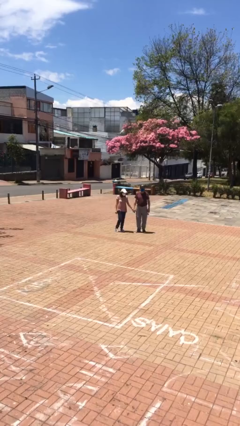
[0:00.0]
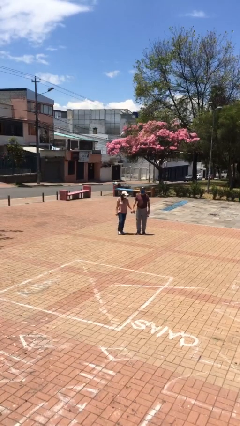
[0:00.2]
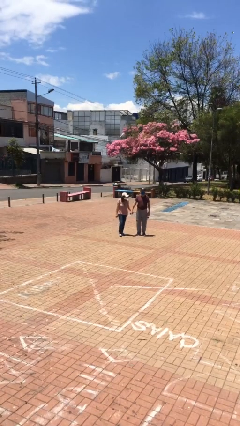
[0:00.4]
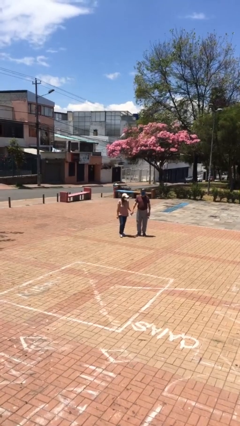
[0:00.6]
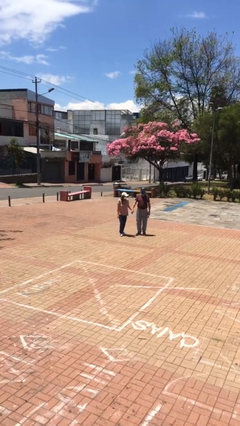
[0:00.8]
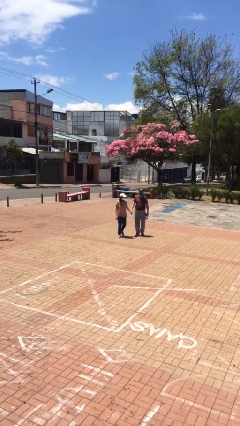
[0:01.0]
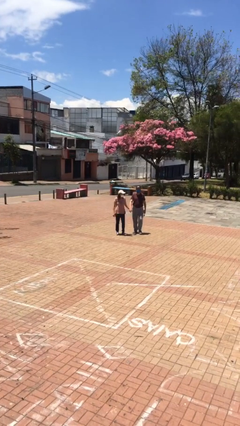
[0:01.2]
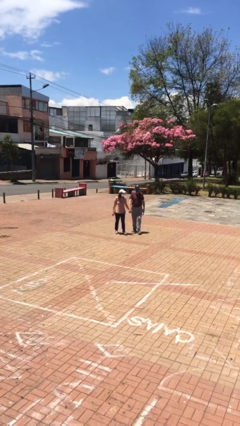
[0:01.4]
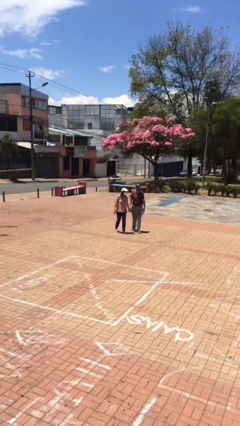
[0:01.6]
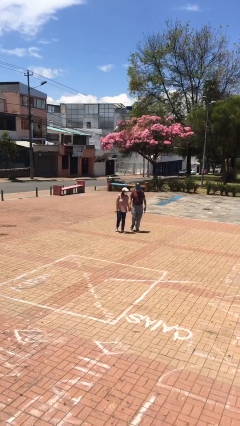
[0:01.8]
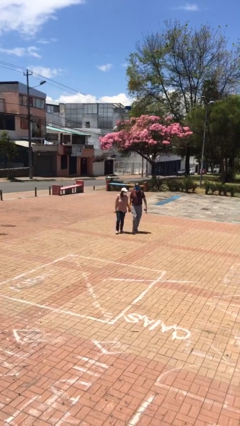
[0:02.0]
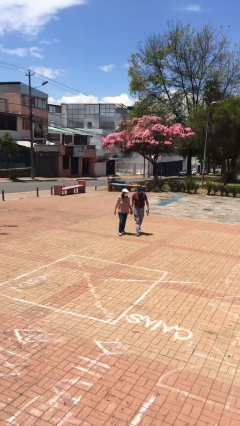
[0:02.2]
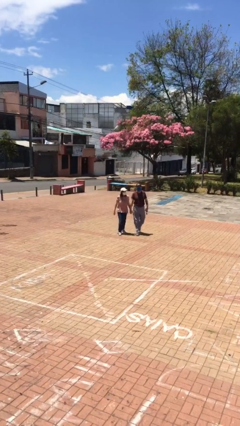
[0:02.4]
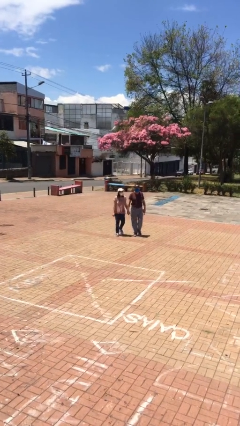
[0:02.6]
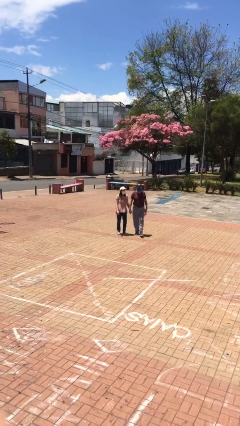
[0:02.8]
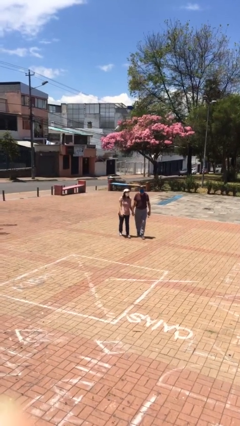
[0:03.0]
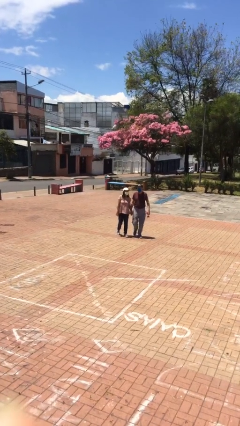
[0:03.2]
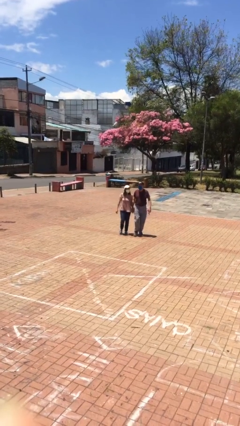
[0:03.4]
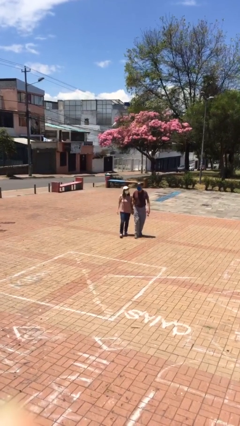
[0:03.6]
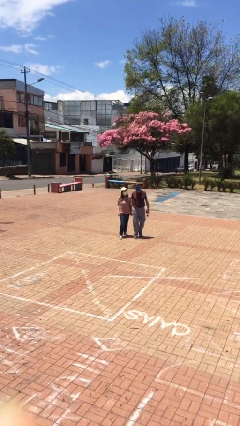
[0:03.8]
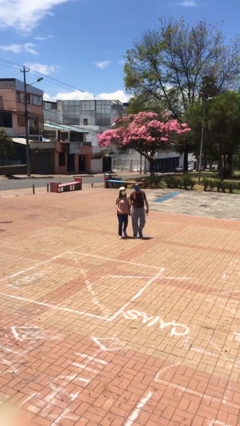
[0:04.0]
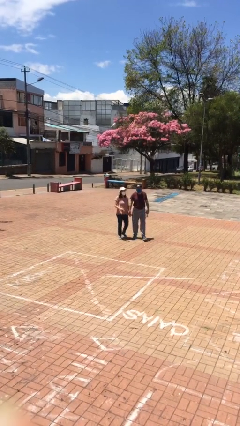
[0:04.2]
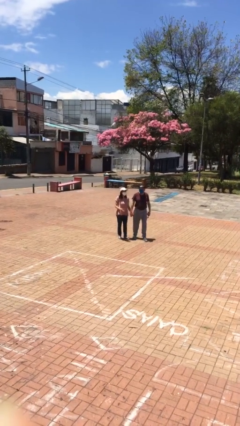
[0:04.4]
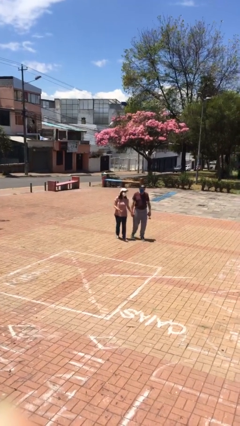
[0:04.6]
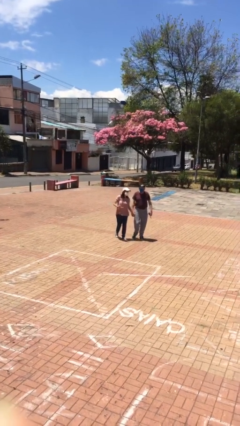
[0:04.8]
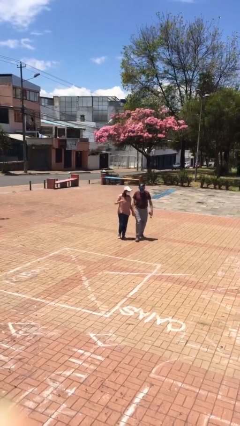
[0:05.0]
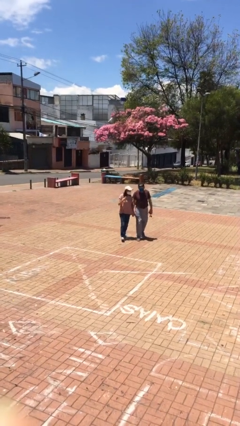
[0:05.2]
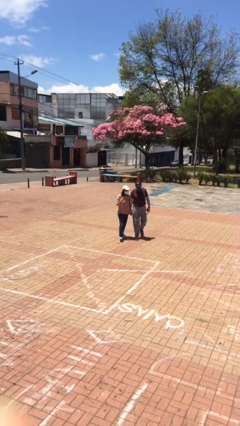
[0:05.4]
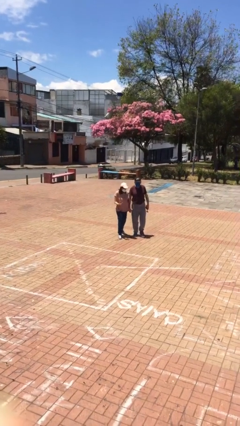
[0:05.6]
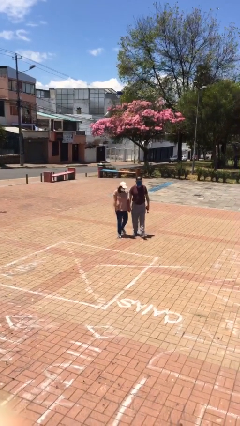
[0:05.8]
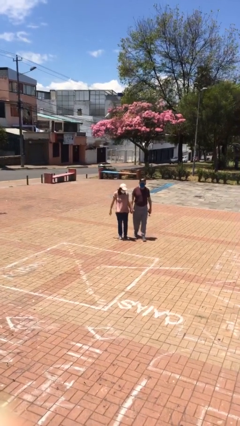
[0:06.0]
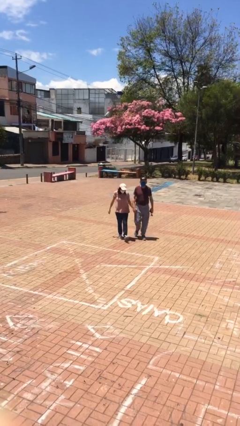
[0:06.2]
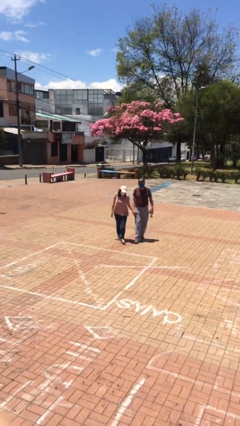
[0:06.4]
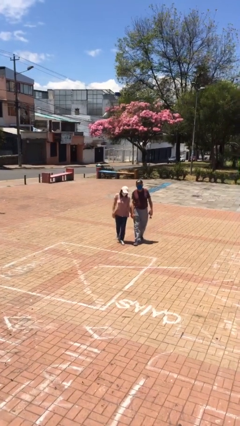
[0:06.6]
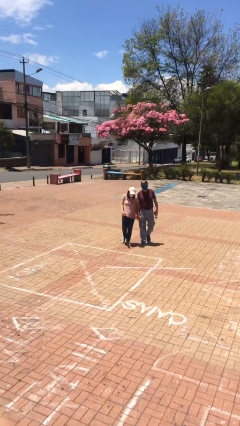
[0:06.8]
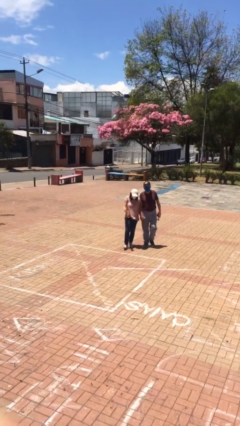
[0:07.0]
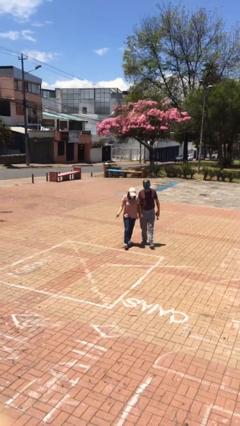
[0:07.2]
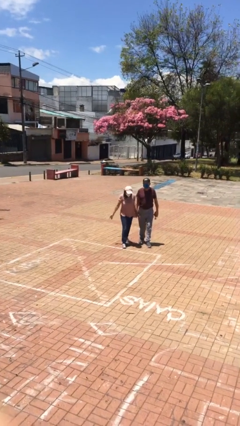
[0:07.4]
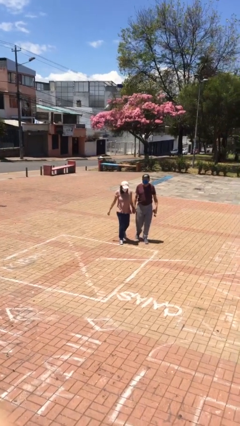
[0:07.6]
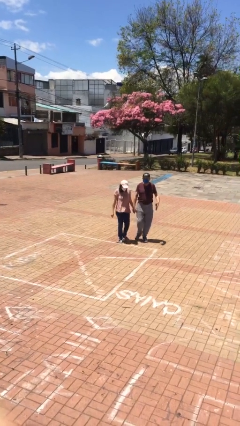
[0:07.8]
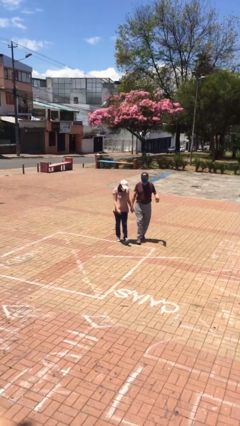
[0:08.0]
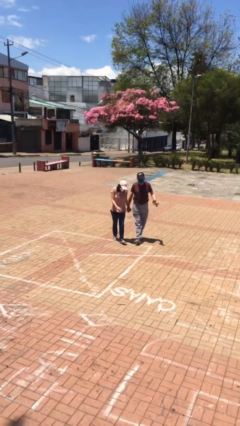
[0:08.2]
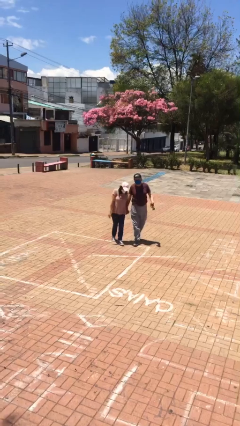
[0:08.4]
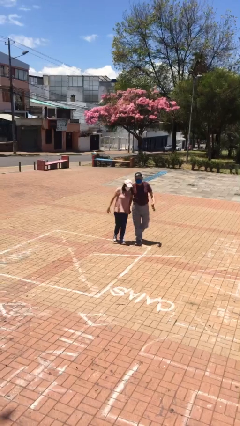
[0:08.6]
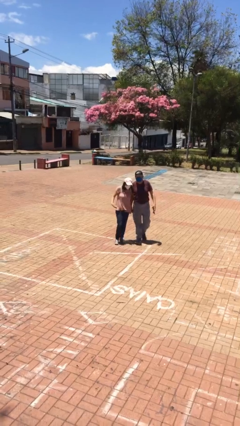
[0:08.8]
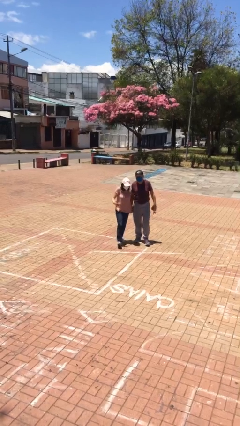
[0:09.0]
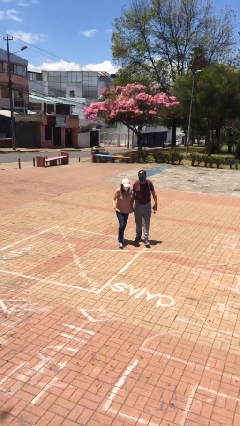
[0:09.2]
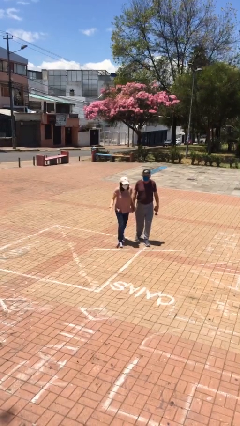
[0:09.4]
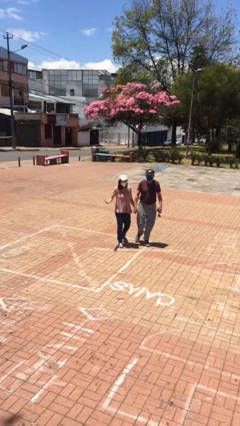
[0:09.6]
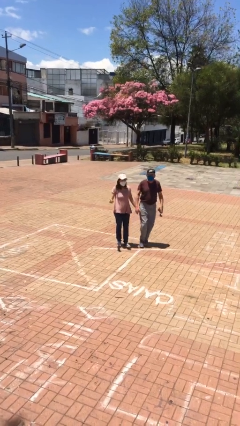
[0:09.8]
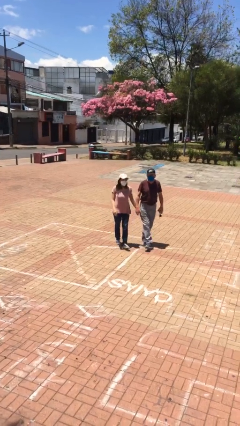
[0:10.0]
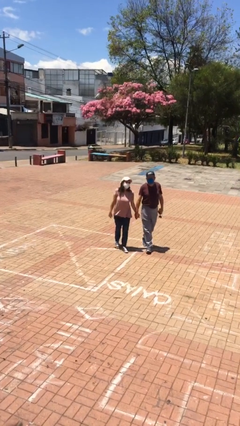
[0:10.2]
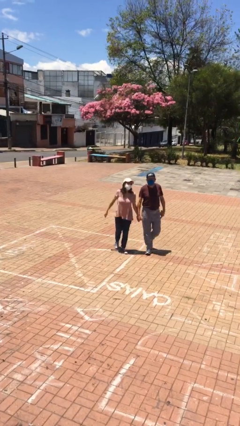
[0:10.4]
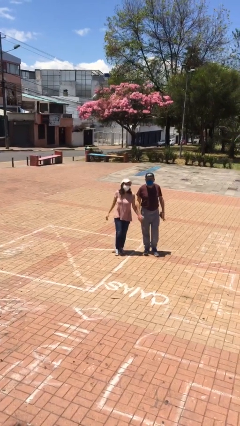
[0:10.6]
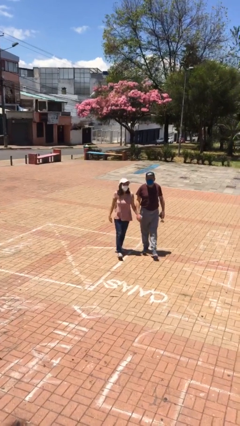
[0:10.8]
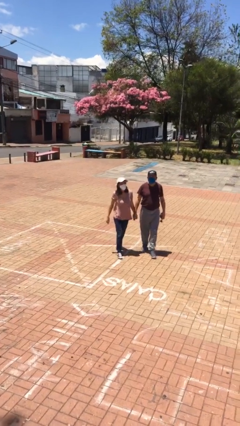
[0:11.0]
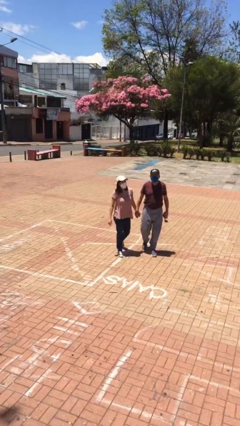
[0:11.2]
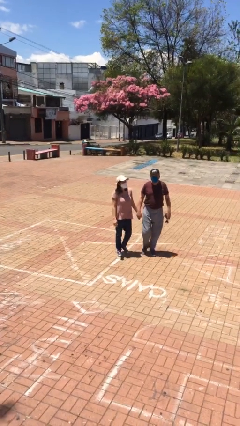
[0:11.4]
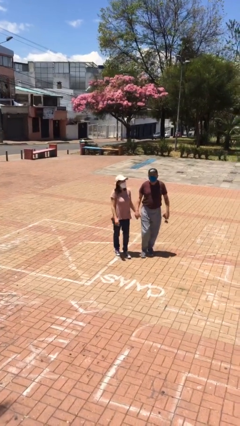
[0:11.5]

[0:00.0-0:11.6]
person holds hand

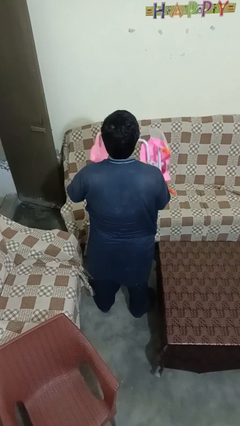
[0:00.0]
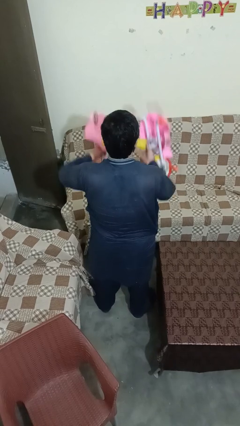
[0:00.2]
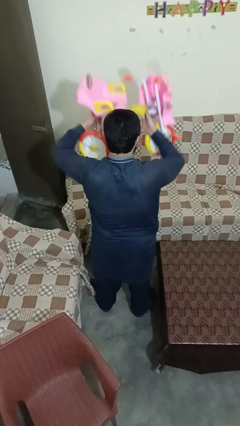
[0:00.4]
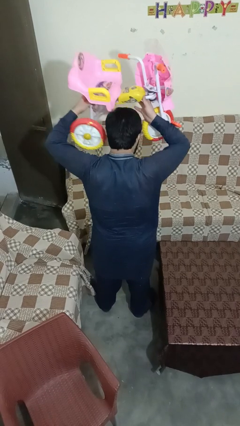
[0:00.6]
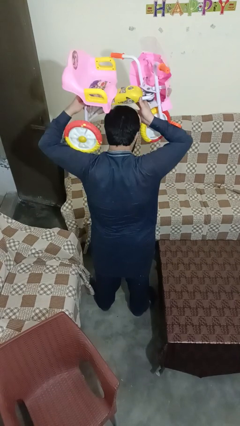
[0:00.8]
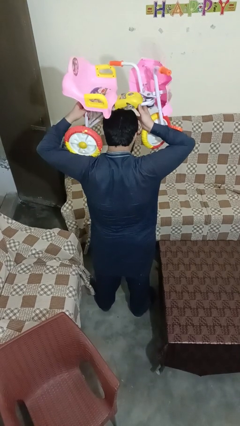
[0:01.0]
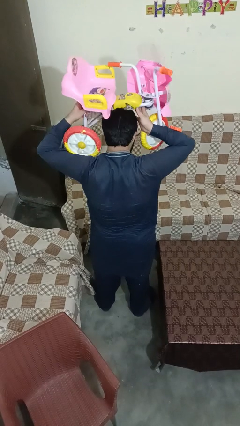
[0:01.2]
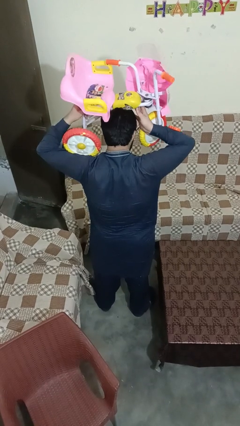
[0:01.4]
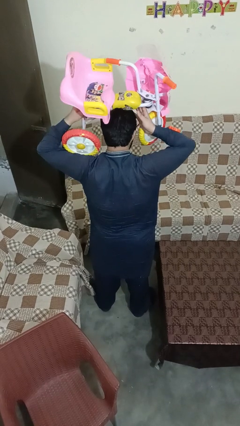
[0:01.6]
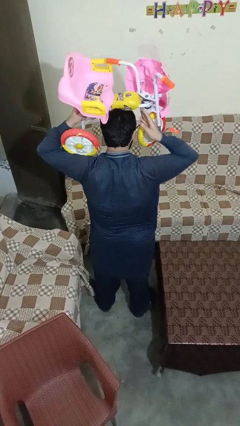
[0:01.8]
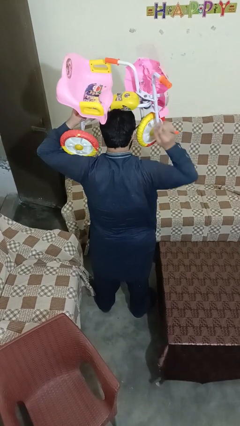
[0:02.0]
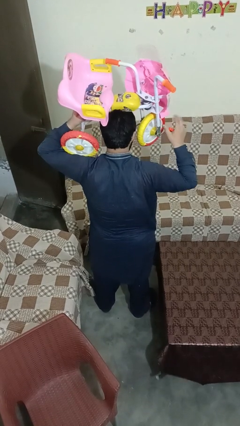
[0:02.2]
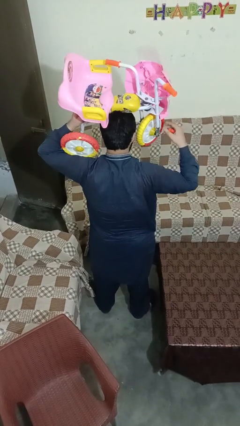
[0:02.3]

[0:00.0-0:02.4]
person holds object above head

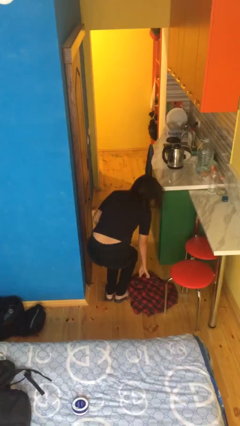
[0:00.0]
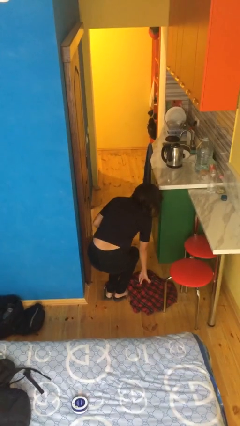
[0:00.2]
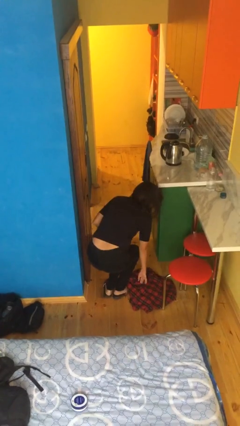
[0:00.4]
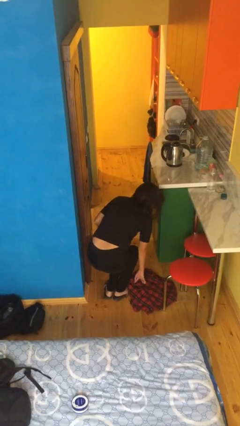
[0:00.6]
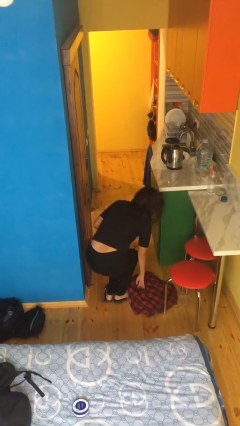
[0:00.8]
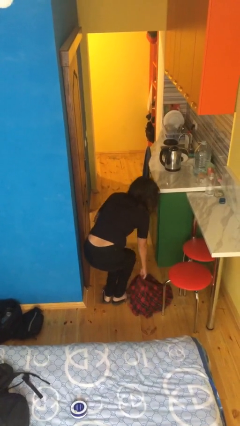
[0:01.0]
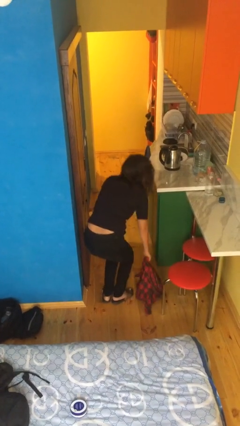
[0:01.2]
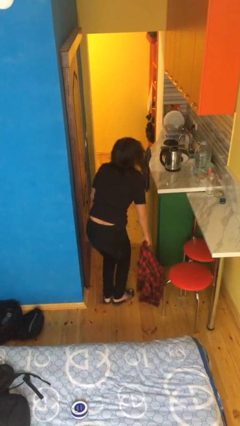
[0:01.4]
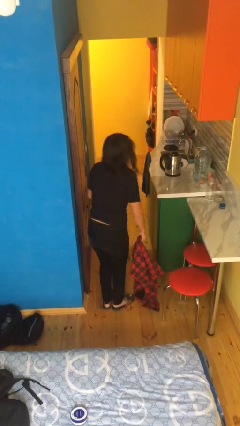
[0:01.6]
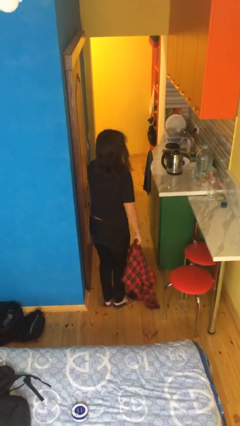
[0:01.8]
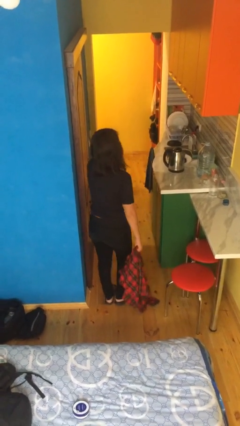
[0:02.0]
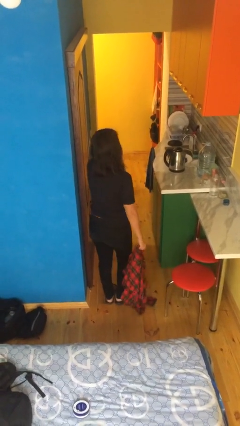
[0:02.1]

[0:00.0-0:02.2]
person picks up object from floor

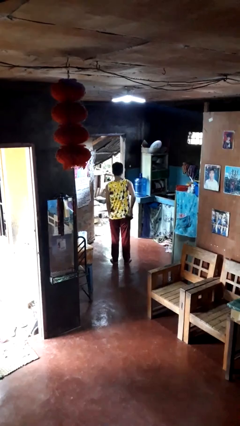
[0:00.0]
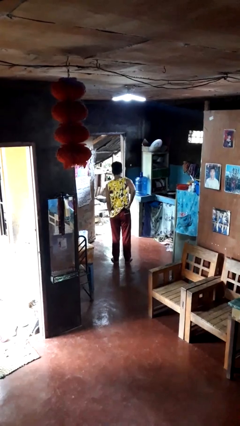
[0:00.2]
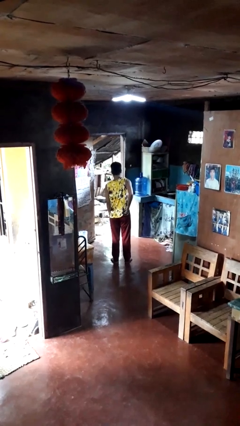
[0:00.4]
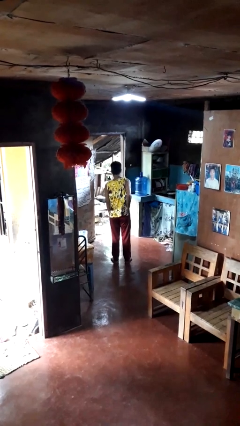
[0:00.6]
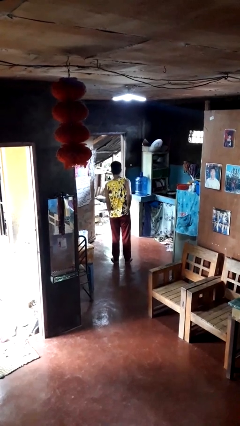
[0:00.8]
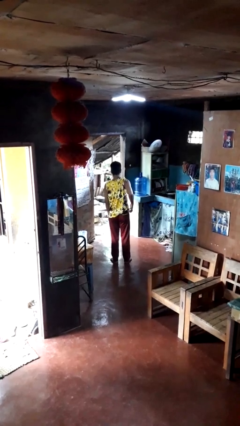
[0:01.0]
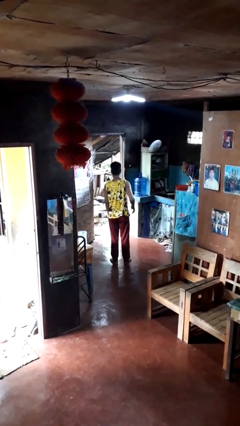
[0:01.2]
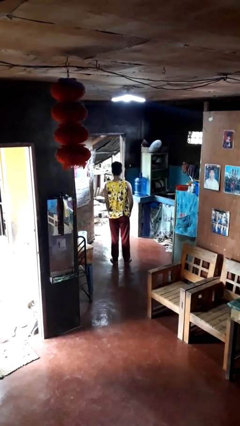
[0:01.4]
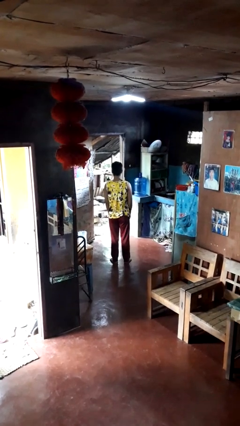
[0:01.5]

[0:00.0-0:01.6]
person puts phone into pocket
